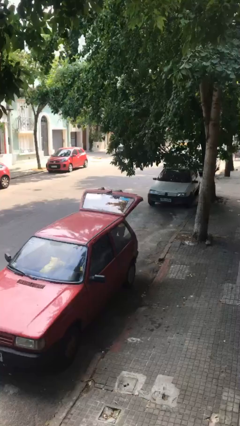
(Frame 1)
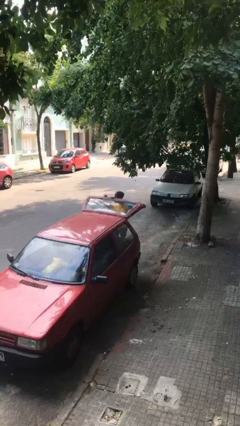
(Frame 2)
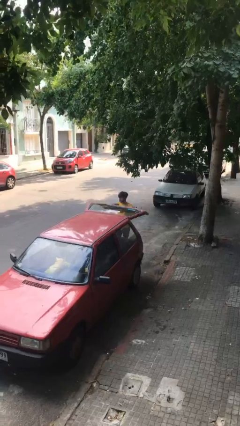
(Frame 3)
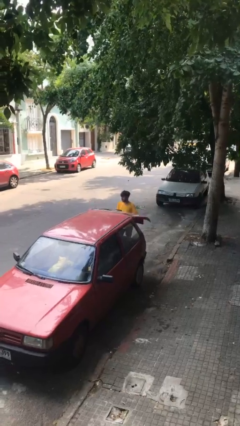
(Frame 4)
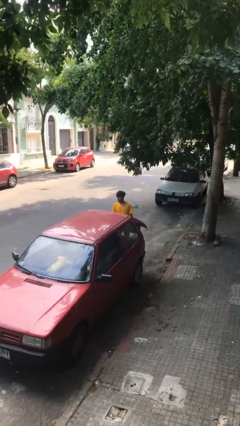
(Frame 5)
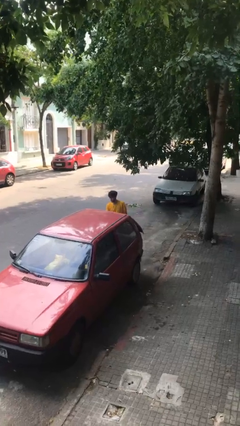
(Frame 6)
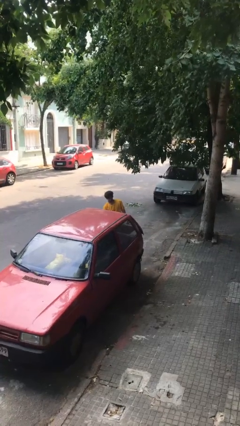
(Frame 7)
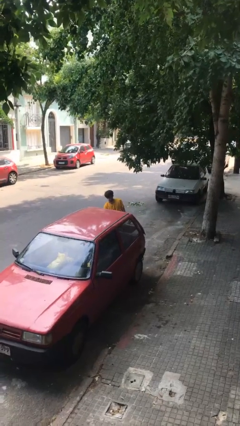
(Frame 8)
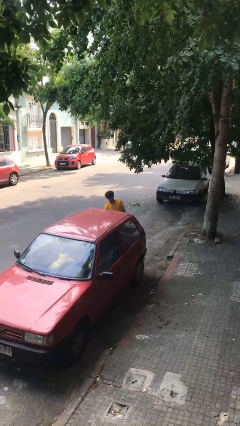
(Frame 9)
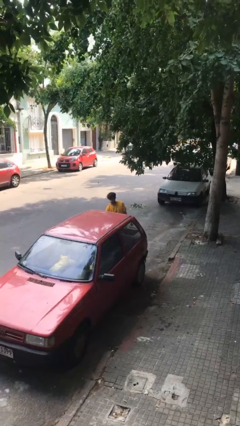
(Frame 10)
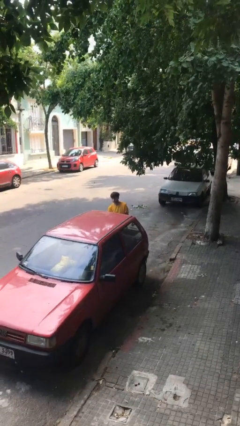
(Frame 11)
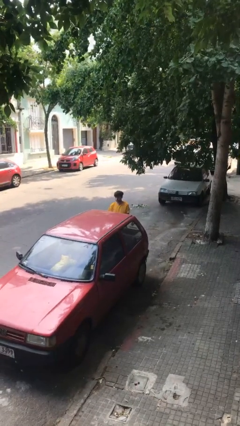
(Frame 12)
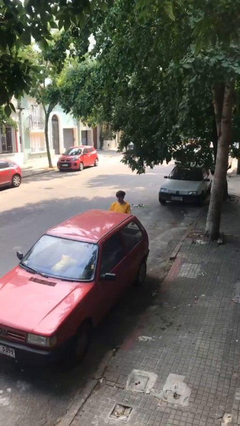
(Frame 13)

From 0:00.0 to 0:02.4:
person closes car trunk

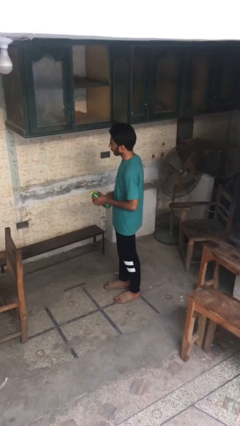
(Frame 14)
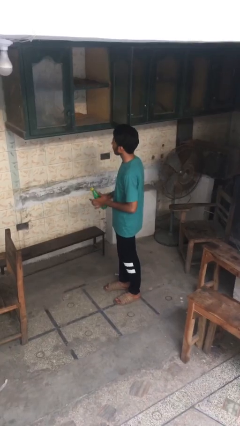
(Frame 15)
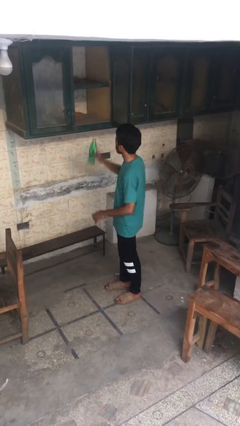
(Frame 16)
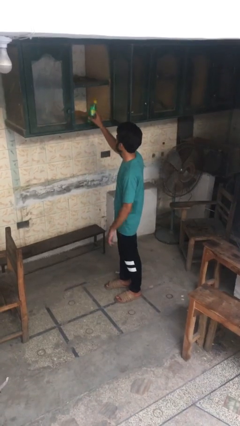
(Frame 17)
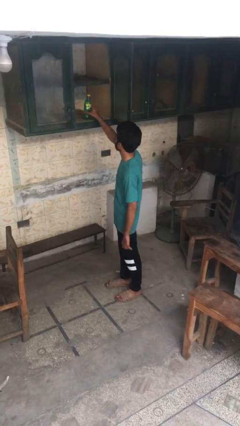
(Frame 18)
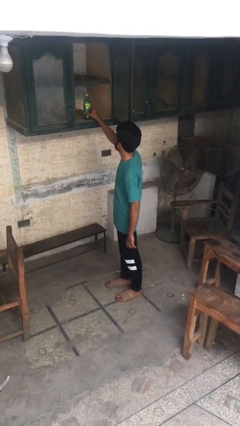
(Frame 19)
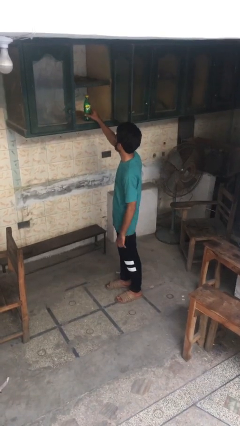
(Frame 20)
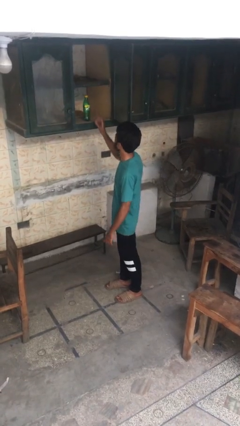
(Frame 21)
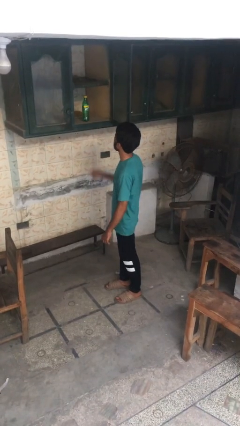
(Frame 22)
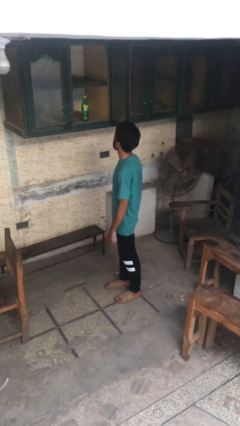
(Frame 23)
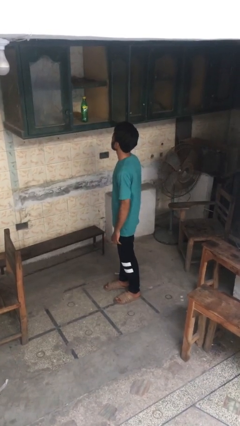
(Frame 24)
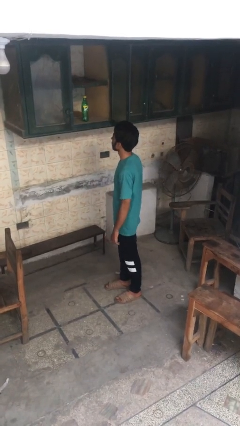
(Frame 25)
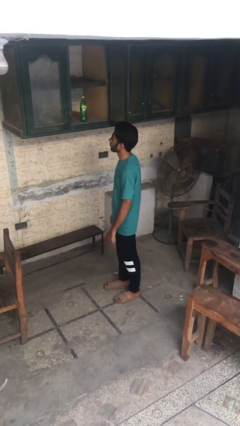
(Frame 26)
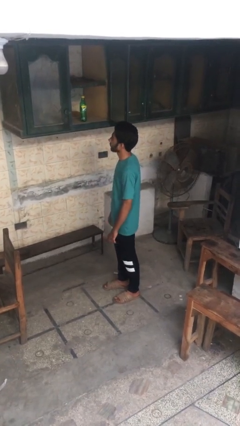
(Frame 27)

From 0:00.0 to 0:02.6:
person puts object in cabinet

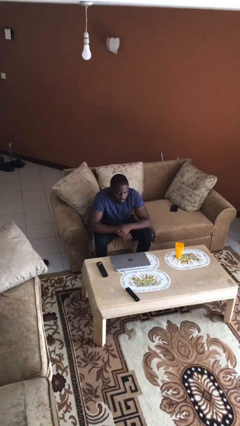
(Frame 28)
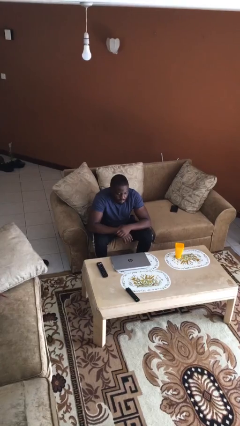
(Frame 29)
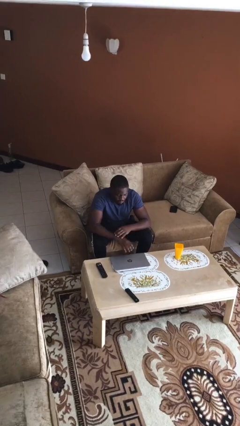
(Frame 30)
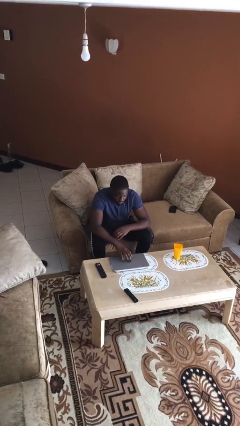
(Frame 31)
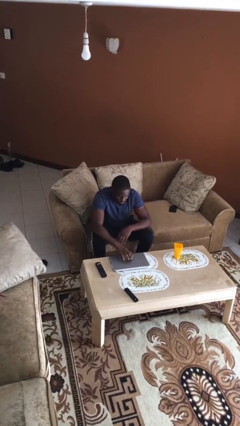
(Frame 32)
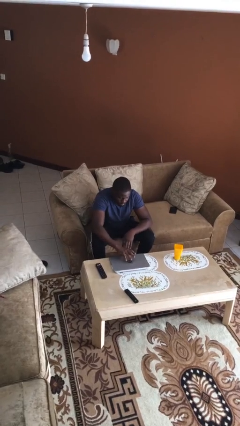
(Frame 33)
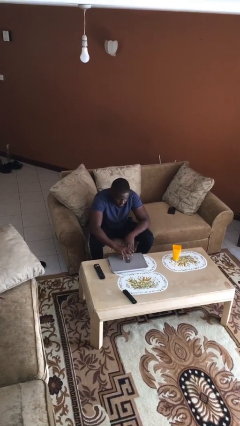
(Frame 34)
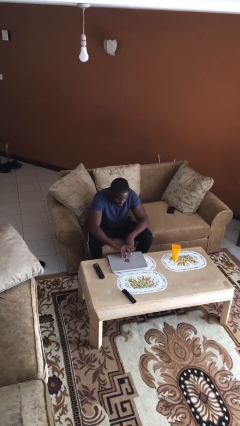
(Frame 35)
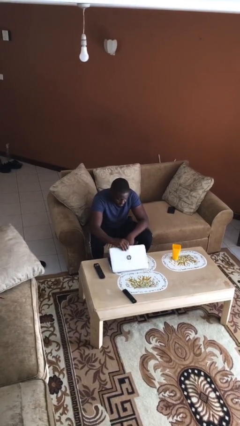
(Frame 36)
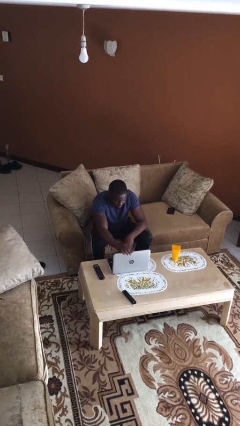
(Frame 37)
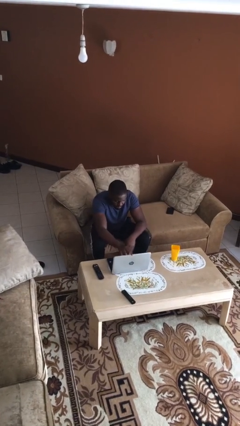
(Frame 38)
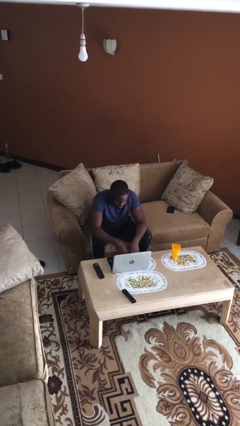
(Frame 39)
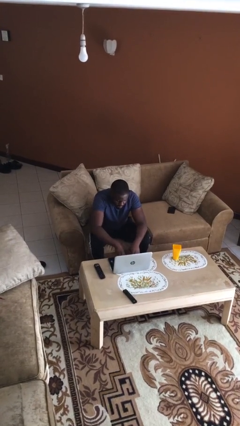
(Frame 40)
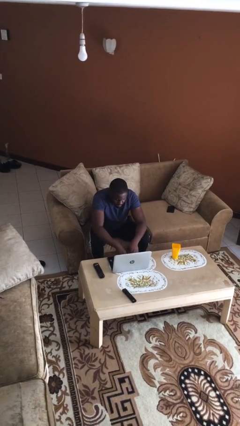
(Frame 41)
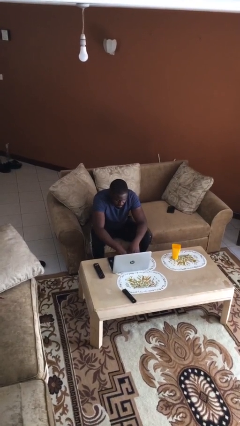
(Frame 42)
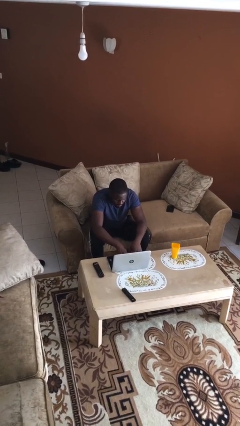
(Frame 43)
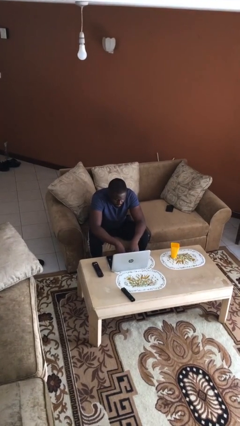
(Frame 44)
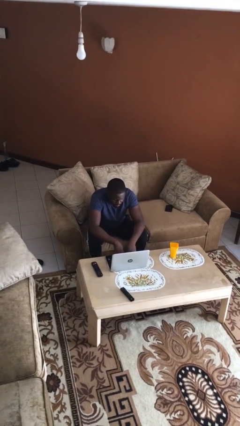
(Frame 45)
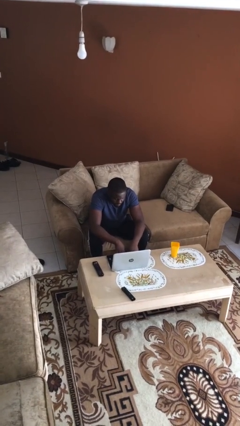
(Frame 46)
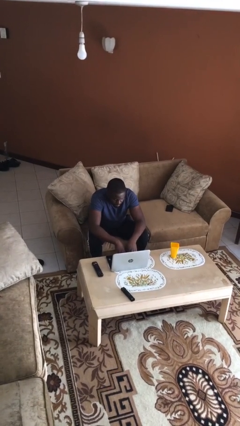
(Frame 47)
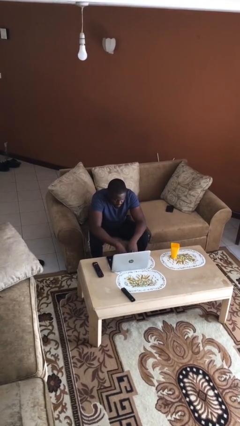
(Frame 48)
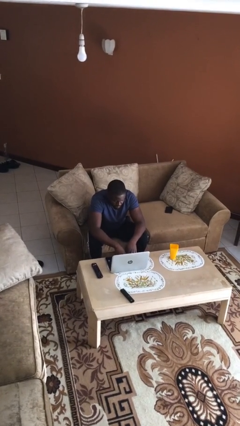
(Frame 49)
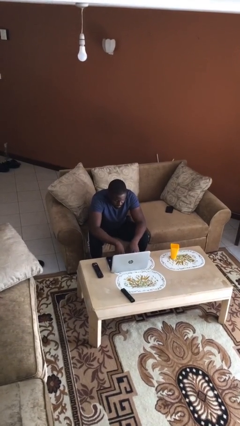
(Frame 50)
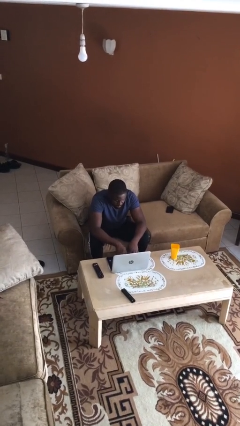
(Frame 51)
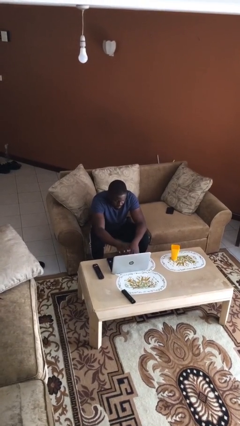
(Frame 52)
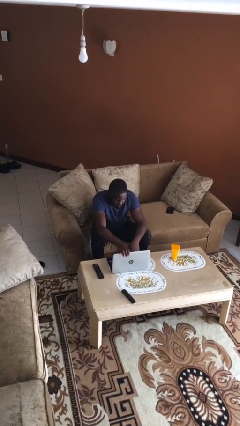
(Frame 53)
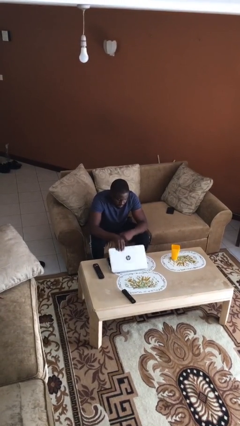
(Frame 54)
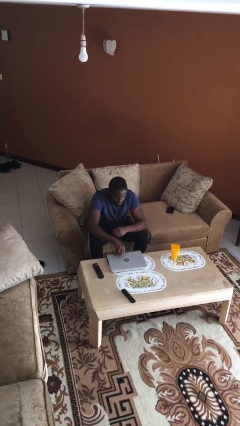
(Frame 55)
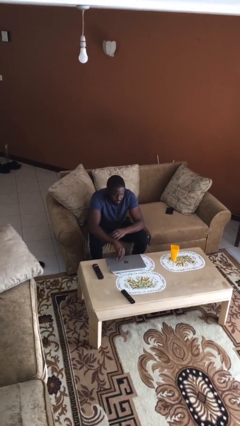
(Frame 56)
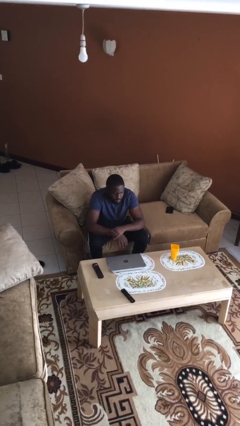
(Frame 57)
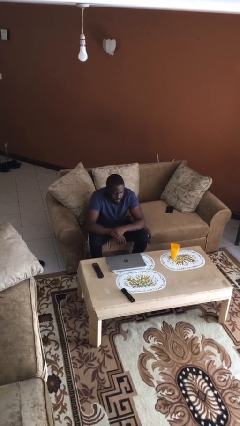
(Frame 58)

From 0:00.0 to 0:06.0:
person interacts with laptop

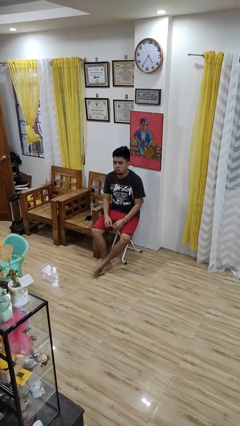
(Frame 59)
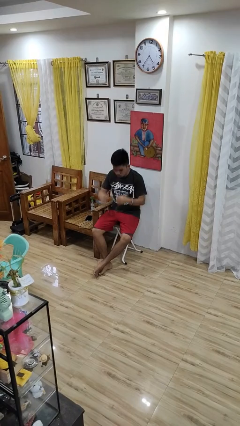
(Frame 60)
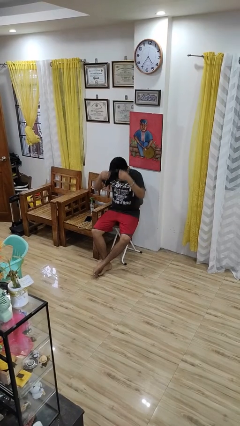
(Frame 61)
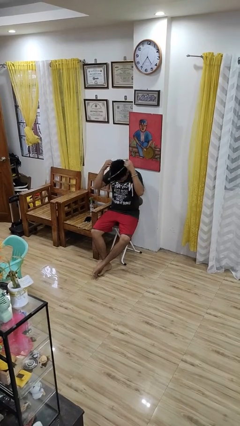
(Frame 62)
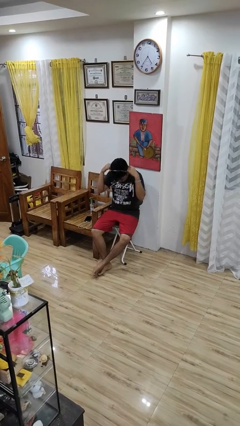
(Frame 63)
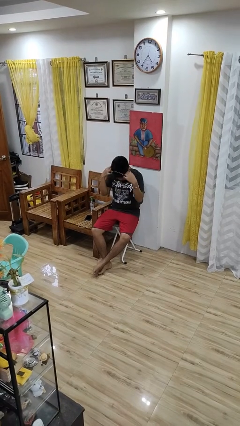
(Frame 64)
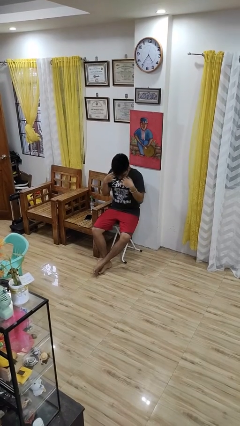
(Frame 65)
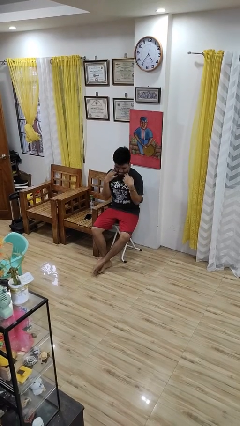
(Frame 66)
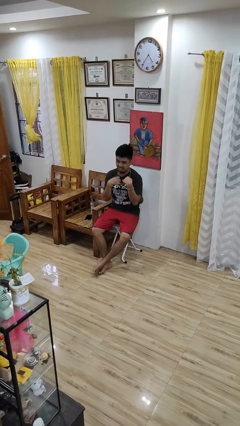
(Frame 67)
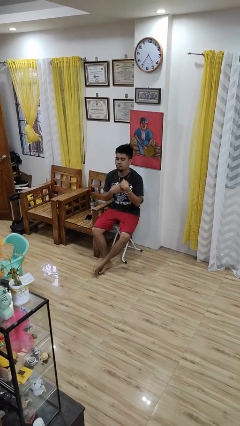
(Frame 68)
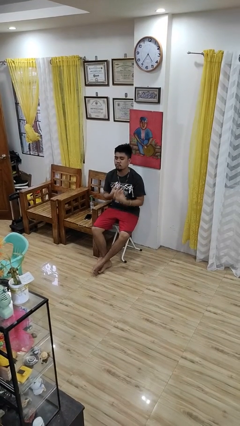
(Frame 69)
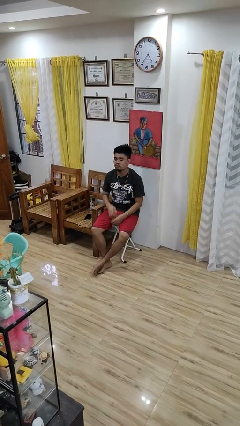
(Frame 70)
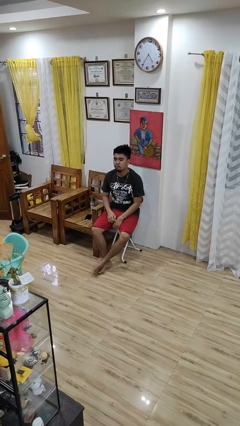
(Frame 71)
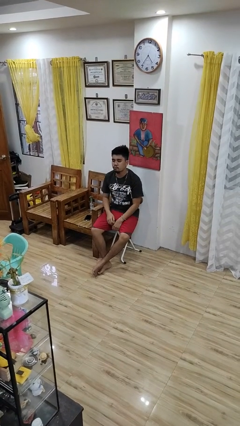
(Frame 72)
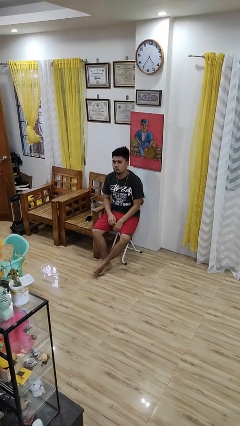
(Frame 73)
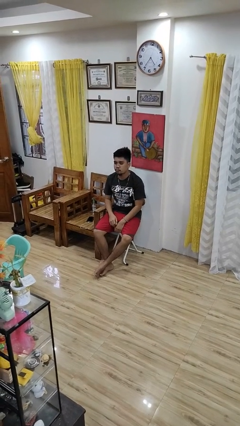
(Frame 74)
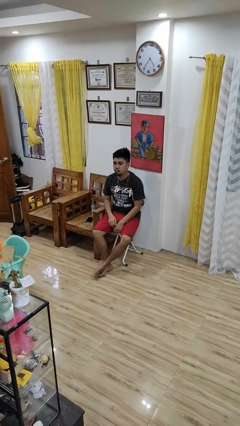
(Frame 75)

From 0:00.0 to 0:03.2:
person puts on necklace

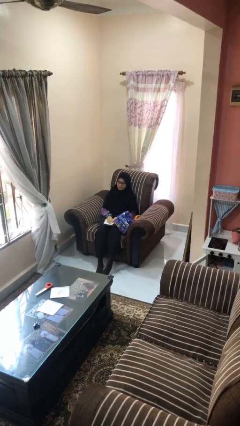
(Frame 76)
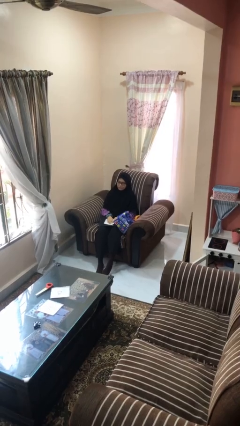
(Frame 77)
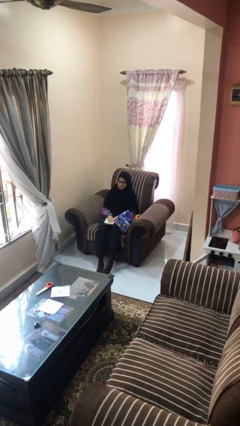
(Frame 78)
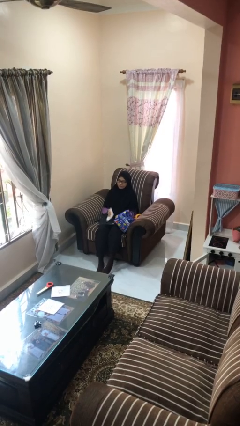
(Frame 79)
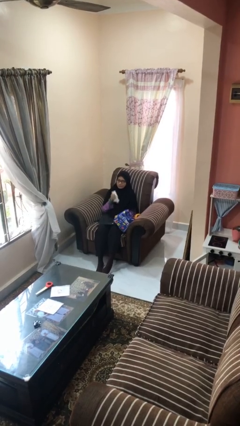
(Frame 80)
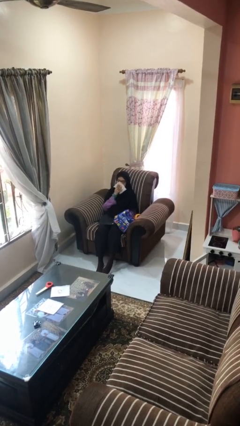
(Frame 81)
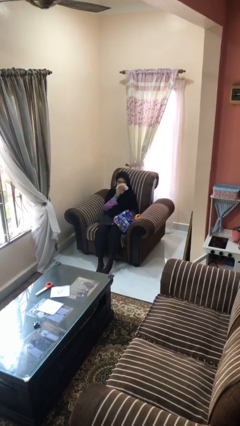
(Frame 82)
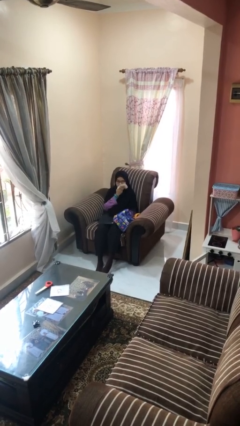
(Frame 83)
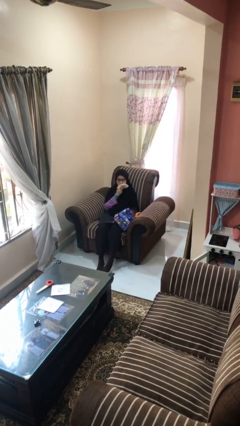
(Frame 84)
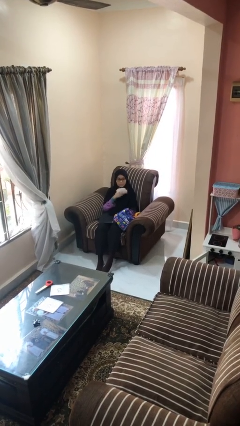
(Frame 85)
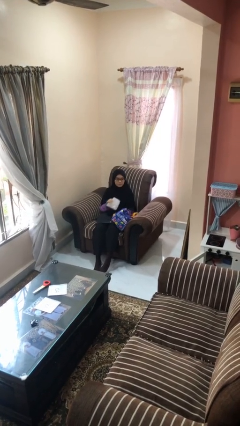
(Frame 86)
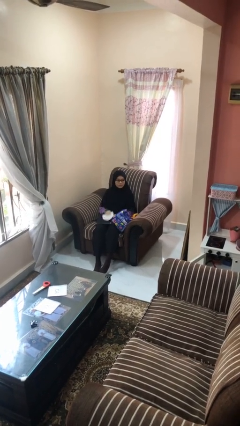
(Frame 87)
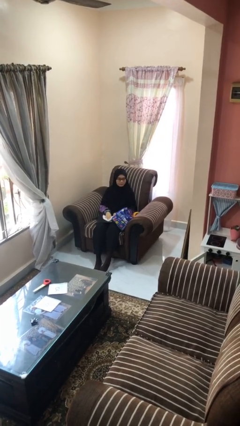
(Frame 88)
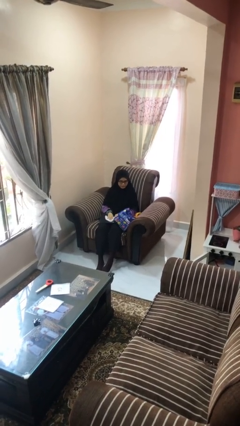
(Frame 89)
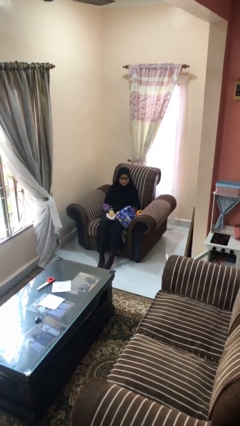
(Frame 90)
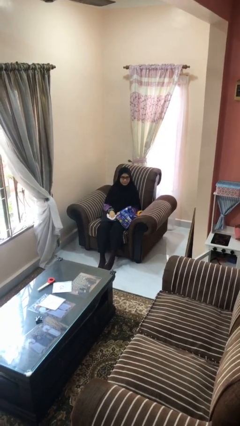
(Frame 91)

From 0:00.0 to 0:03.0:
person wipes mouth with napkin

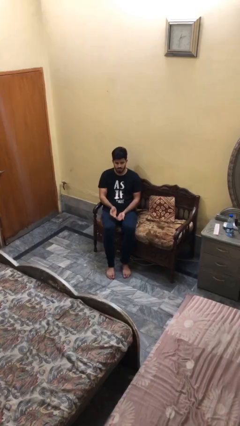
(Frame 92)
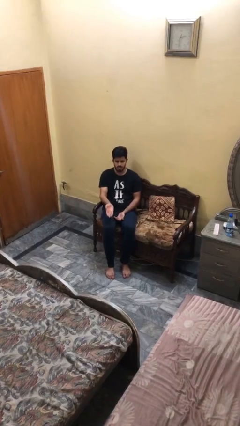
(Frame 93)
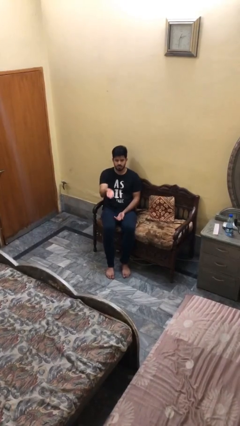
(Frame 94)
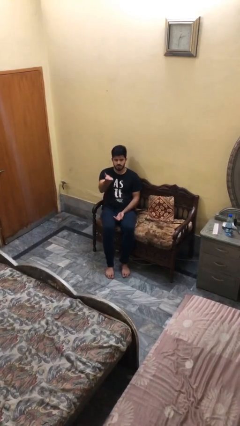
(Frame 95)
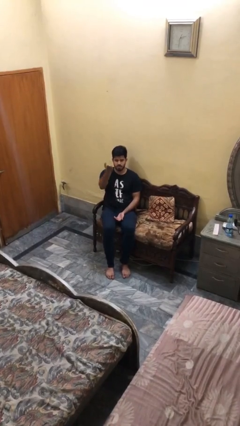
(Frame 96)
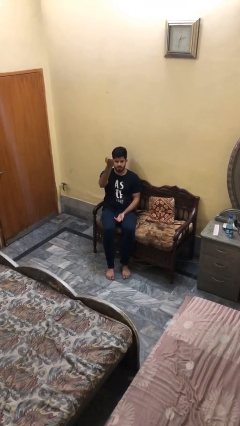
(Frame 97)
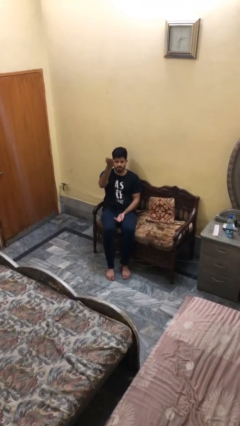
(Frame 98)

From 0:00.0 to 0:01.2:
person gestures swipe up
